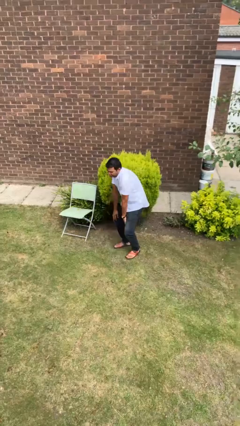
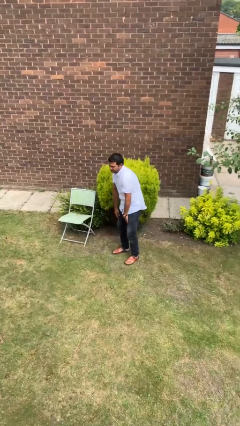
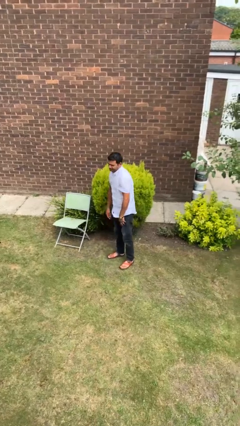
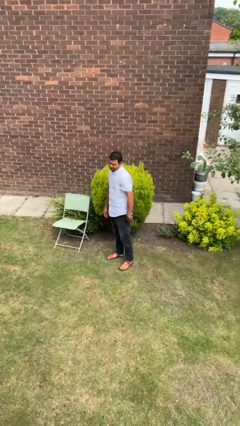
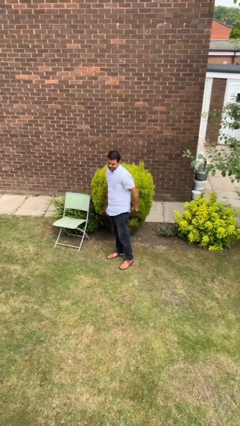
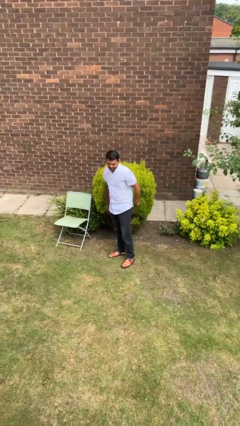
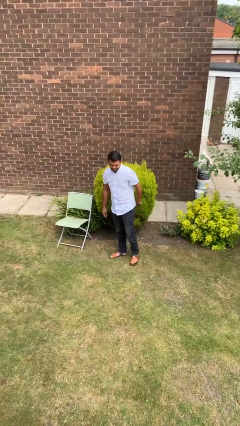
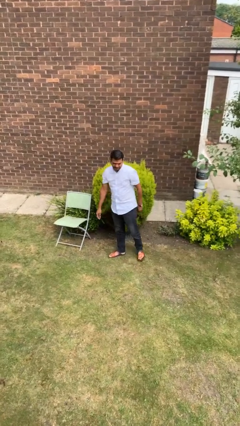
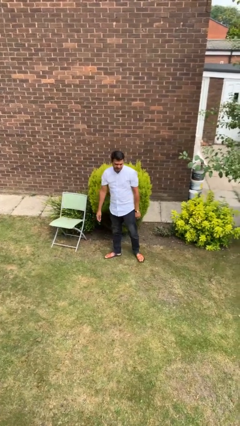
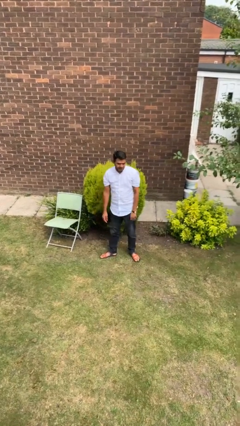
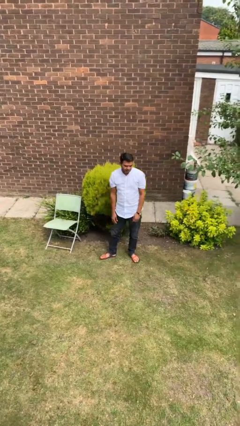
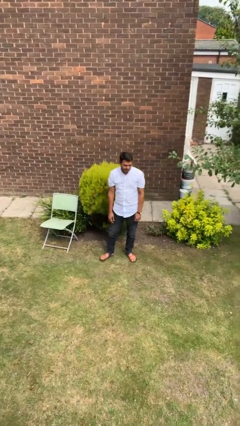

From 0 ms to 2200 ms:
person stands up

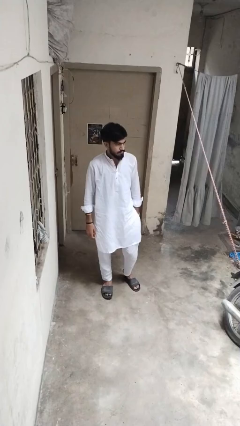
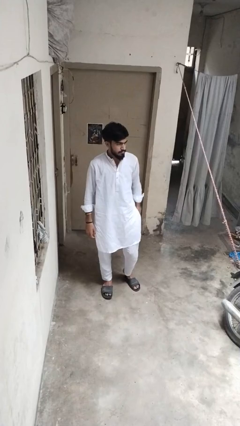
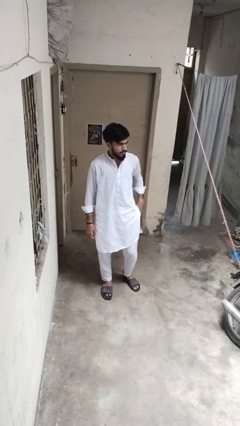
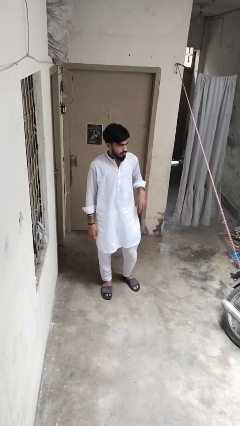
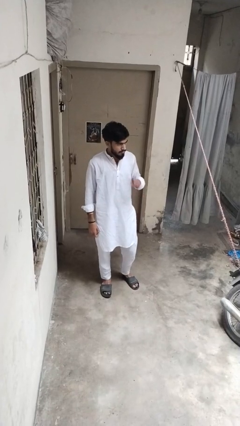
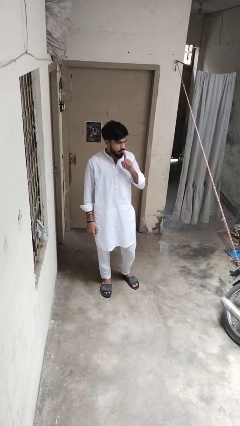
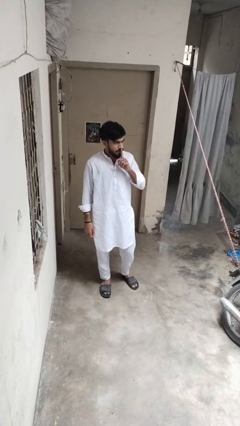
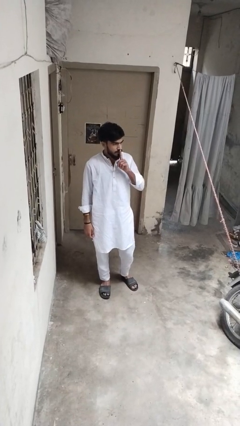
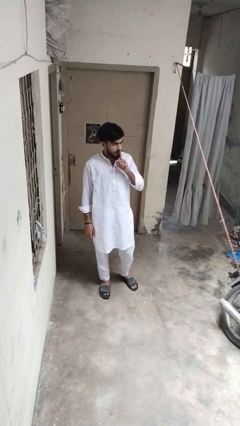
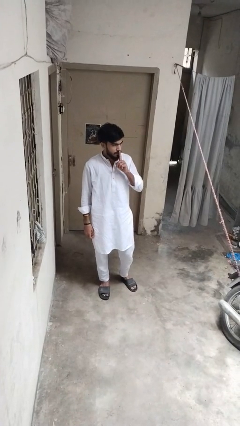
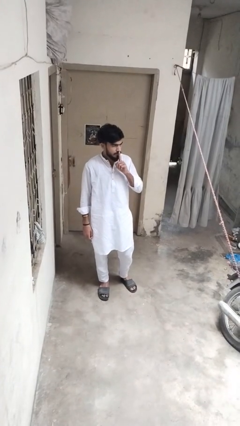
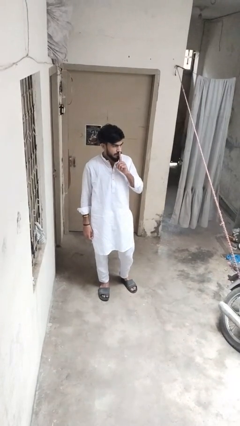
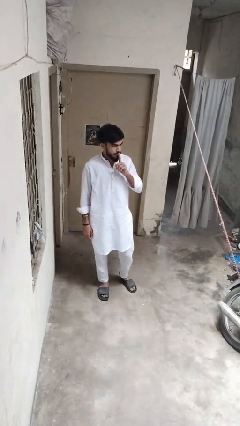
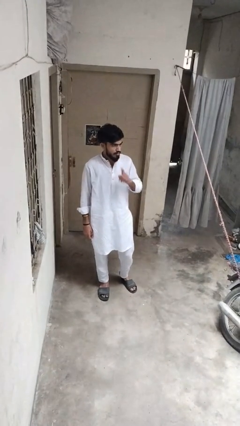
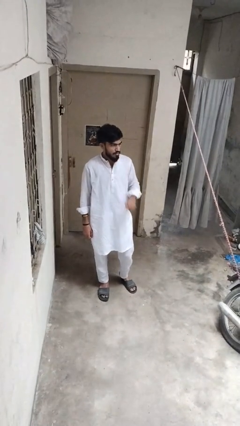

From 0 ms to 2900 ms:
person gestures be quiet

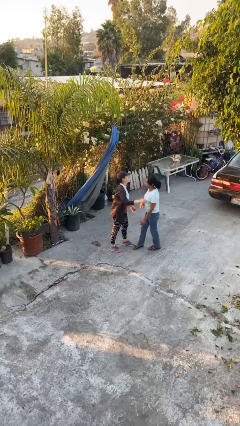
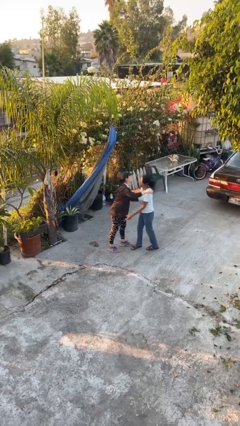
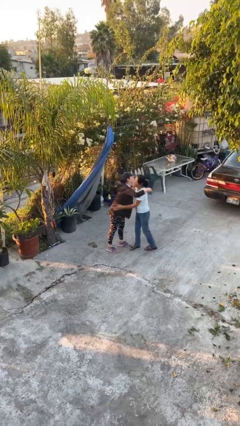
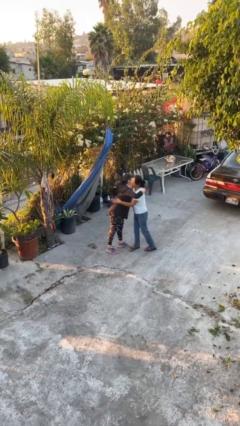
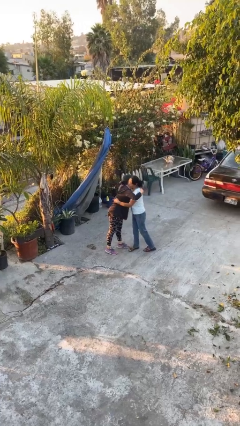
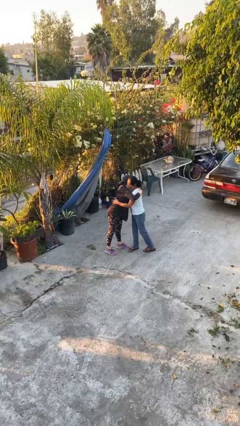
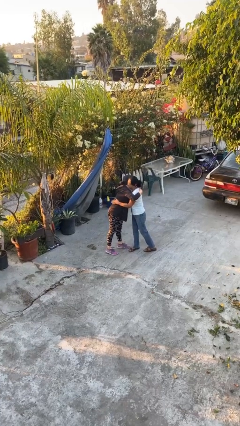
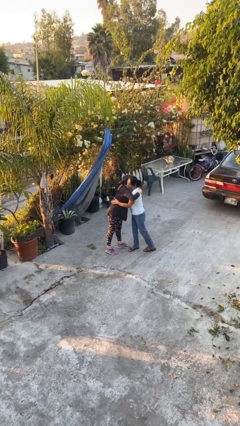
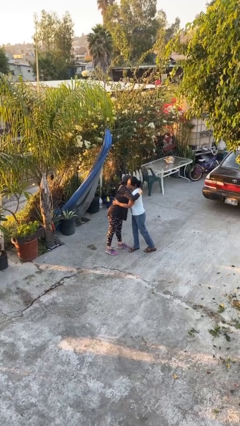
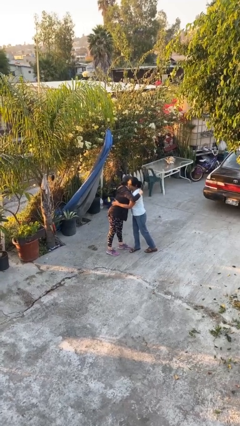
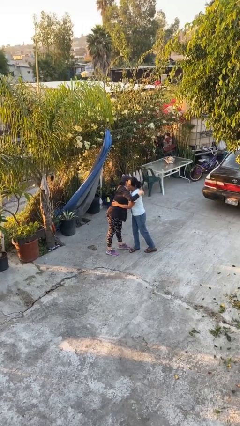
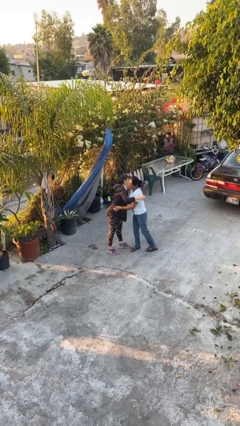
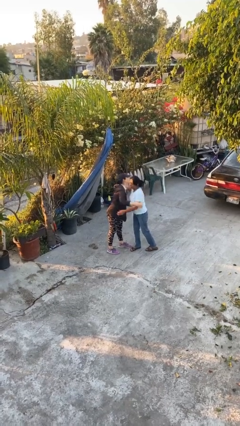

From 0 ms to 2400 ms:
person embraces person

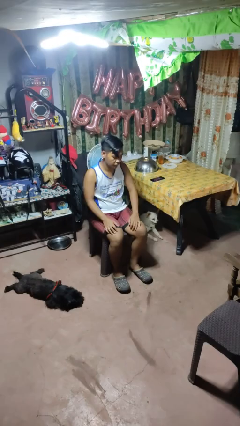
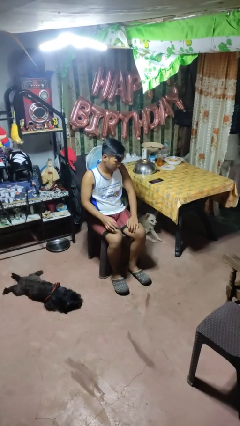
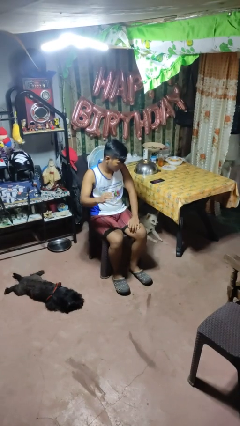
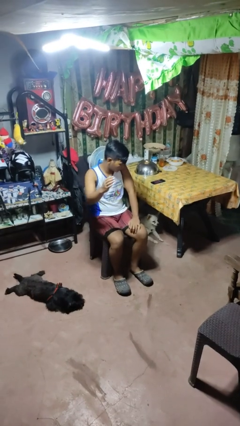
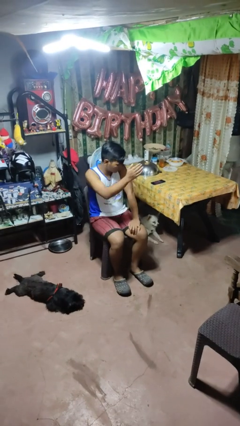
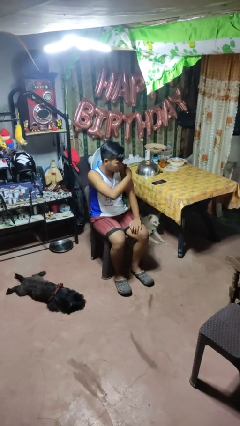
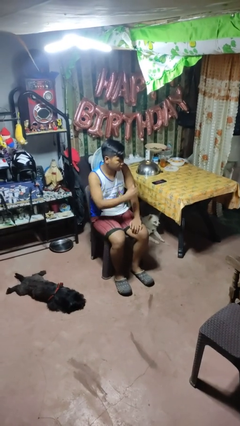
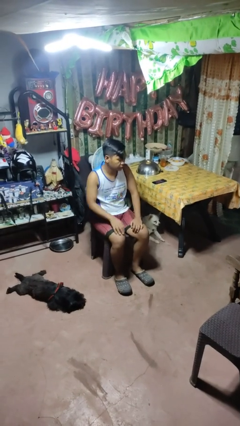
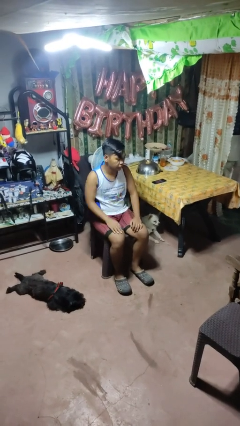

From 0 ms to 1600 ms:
person swats bug

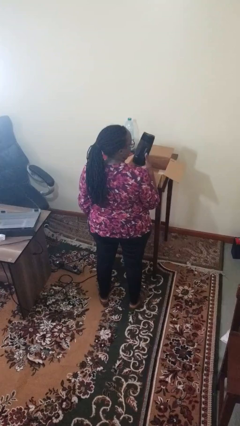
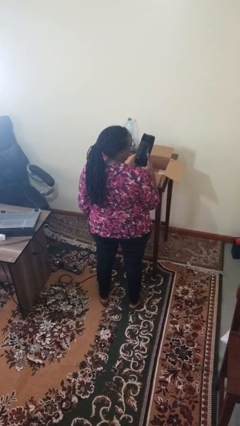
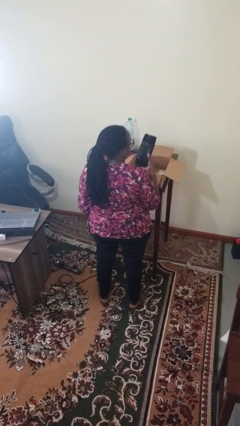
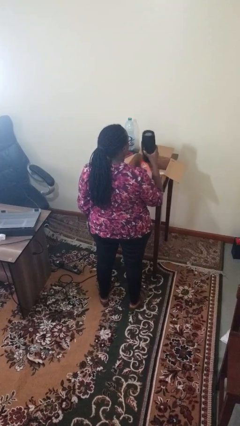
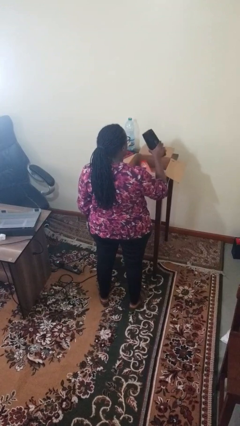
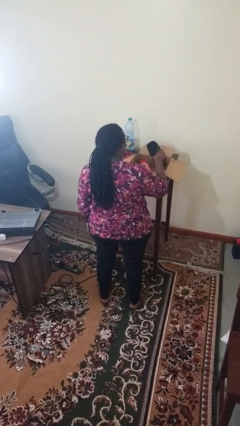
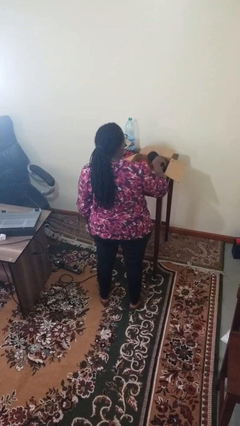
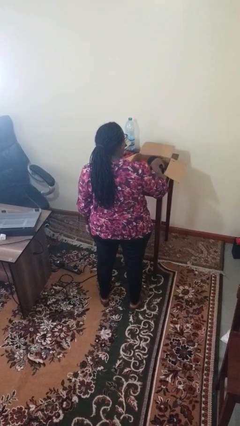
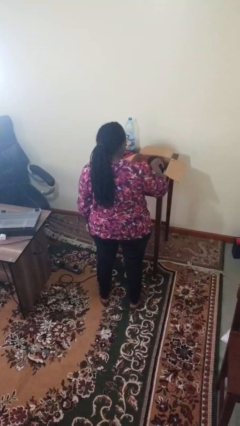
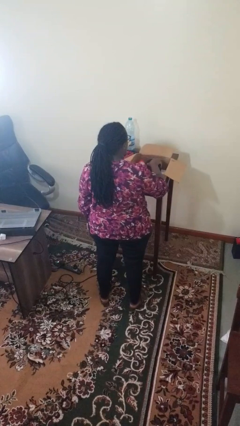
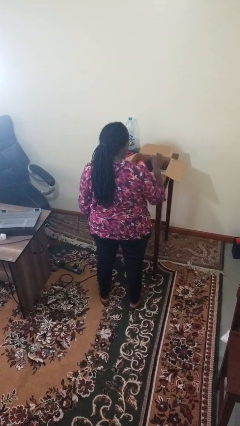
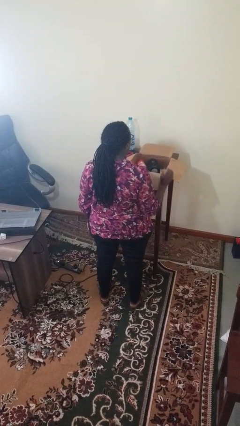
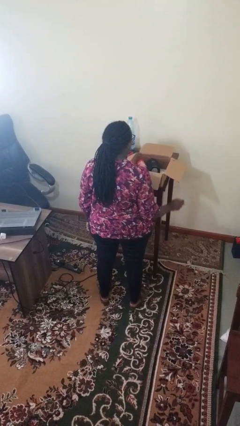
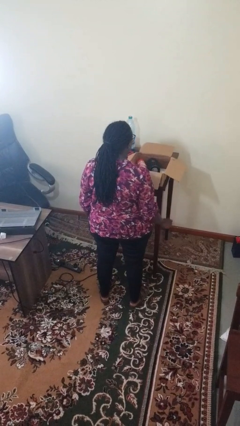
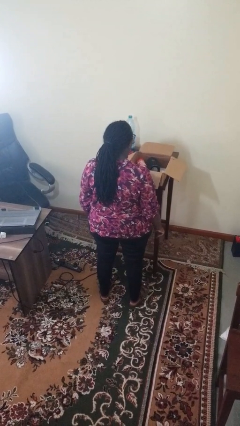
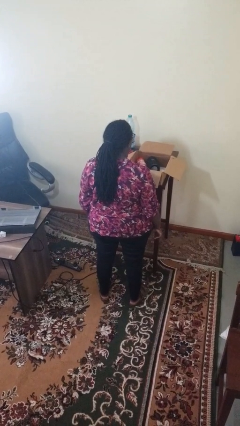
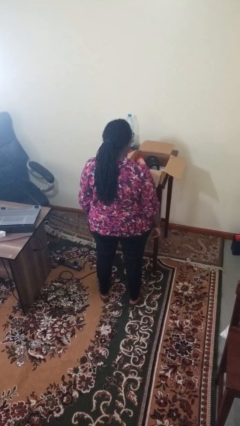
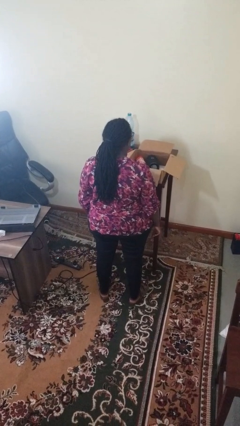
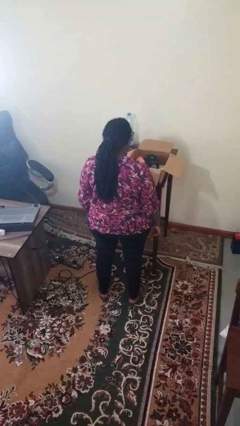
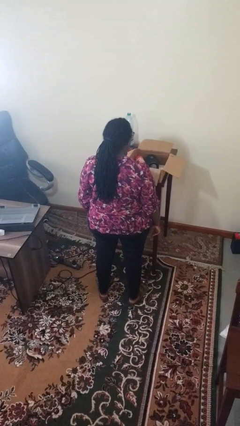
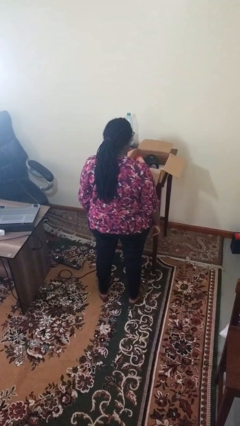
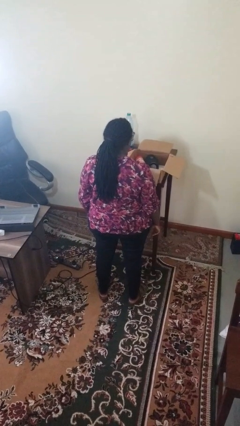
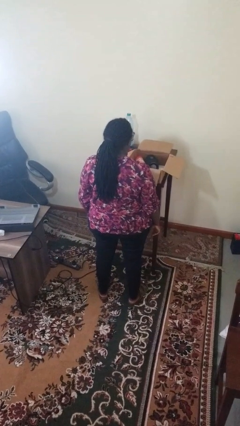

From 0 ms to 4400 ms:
person puts object into box

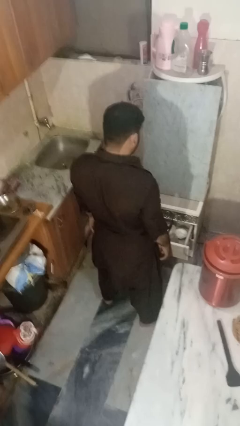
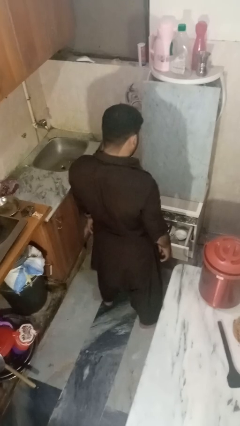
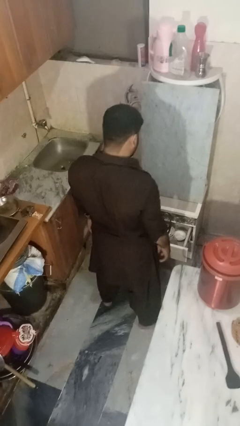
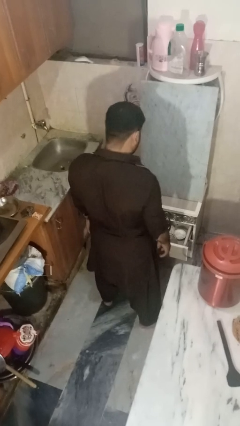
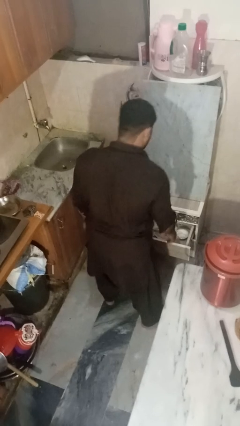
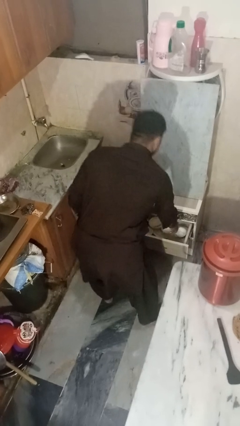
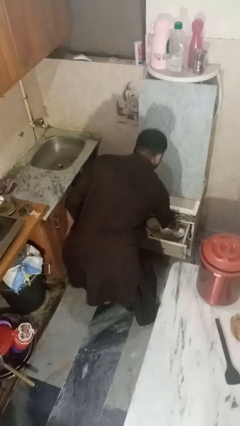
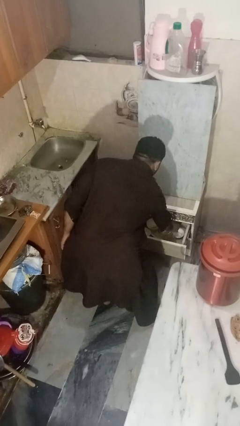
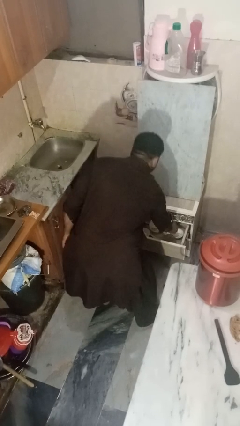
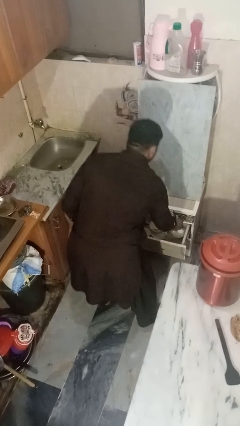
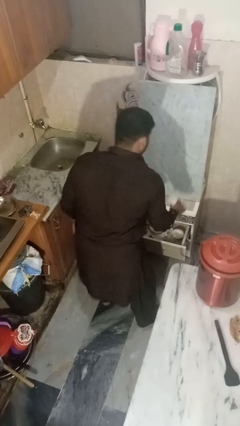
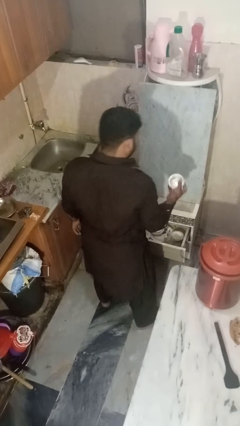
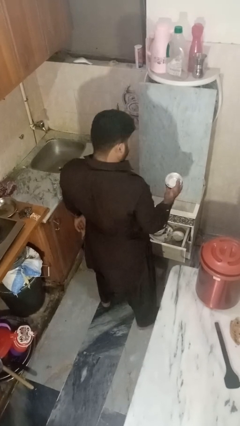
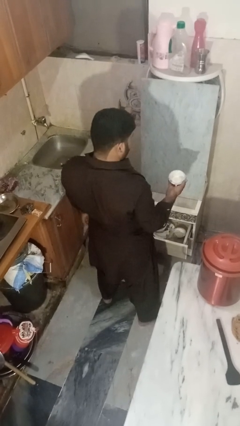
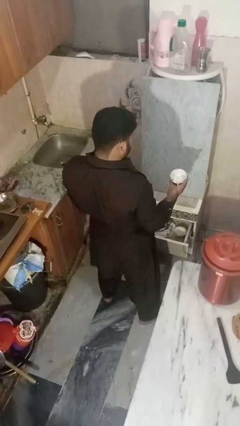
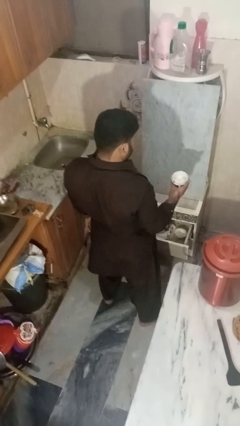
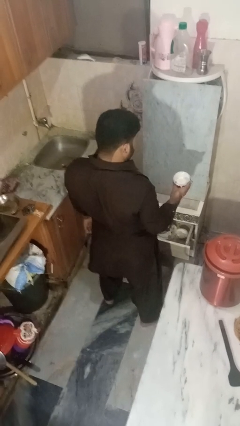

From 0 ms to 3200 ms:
person takes object from kitchen drawer

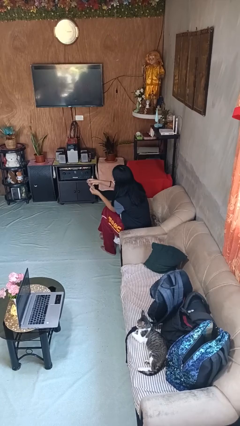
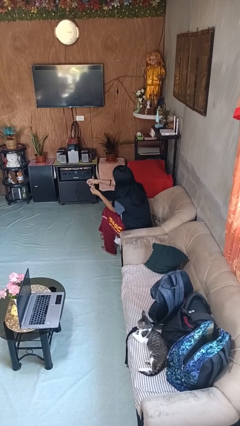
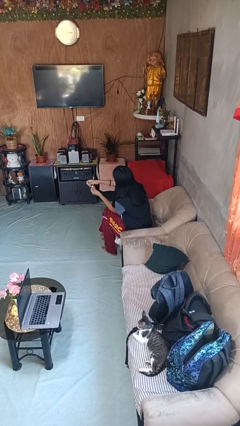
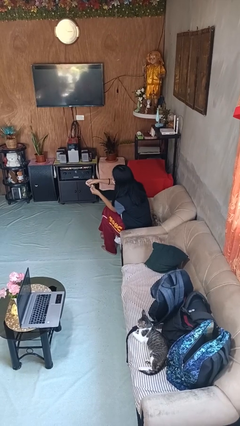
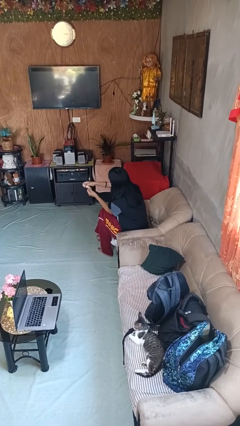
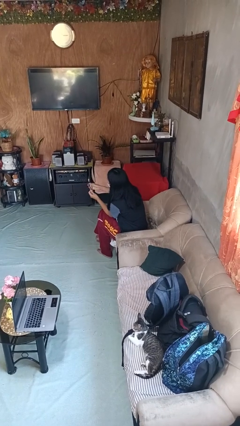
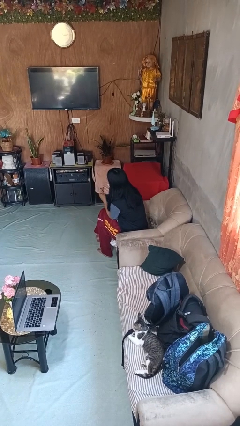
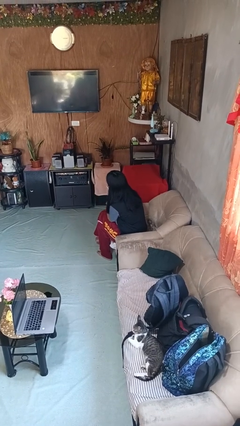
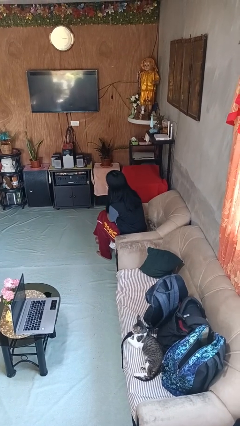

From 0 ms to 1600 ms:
person clips fingernails
